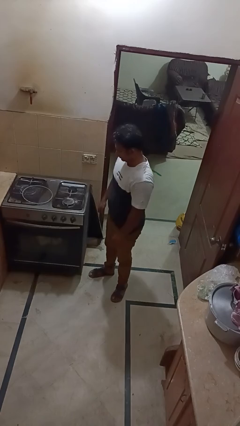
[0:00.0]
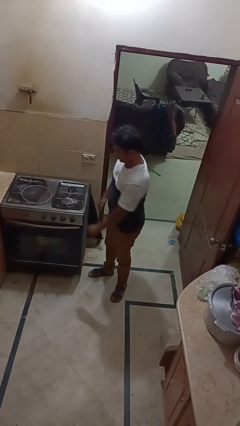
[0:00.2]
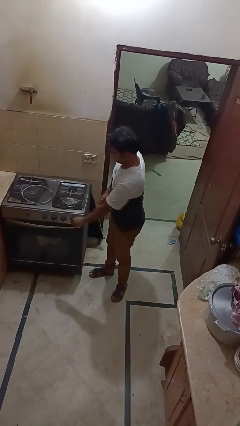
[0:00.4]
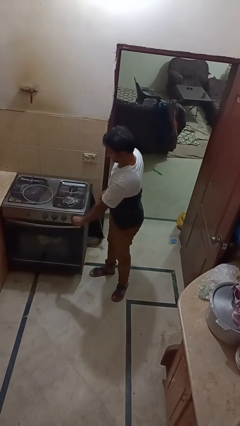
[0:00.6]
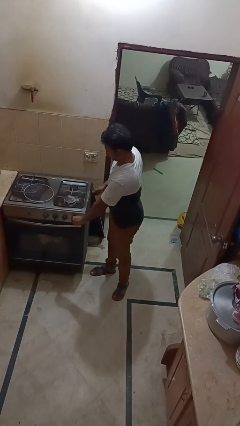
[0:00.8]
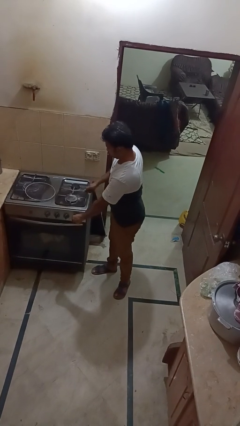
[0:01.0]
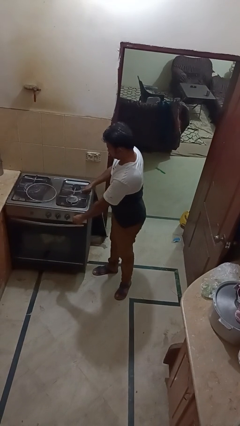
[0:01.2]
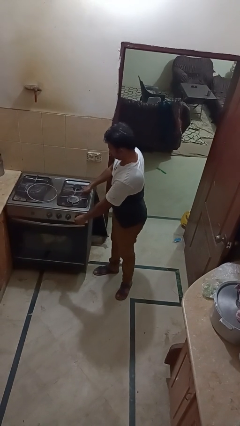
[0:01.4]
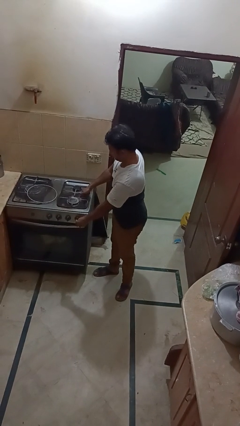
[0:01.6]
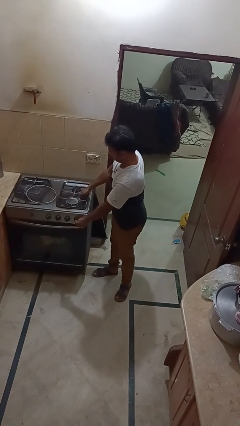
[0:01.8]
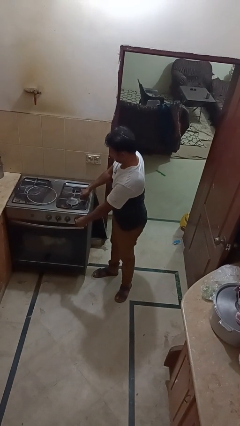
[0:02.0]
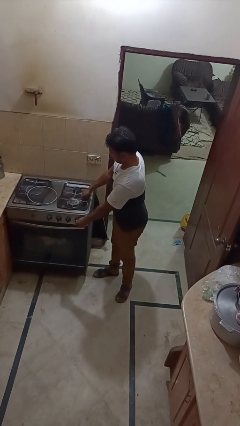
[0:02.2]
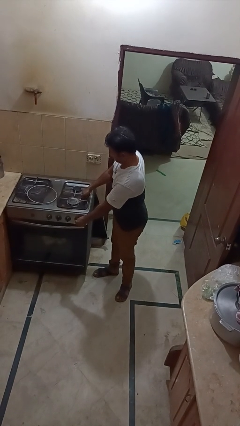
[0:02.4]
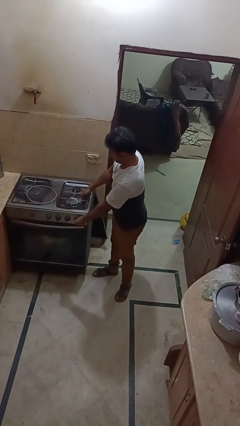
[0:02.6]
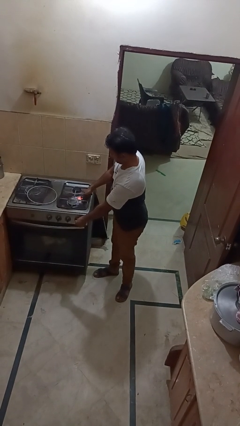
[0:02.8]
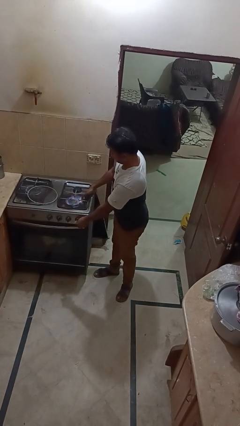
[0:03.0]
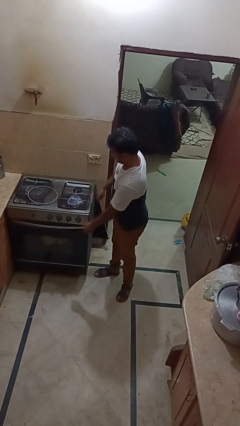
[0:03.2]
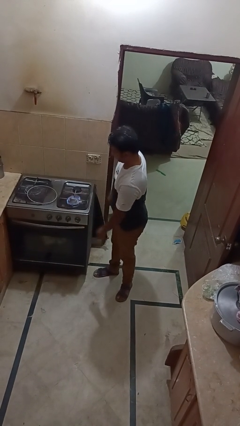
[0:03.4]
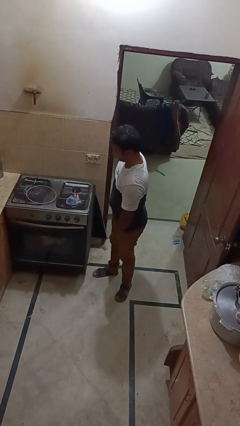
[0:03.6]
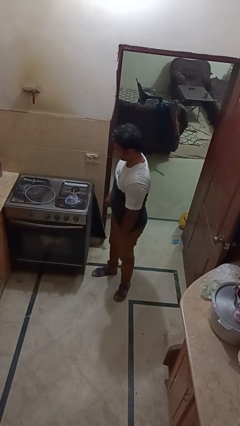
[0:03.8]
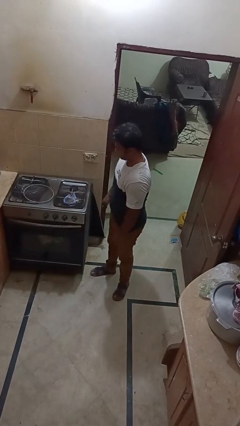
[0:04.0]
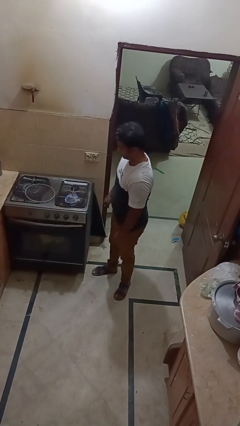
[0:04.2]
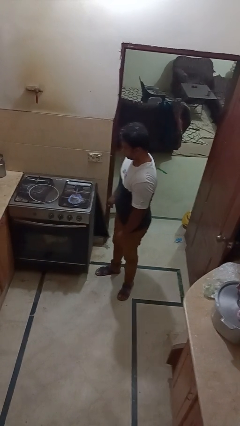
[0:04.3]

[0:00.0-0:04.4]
person turns on stovetop

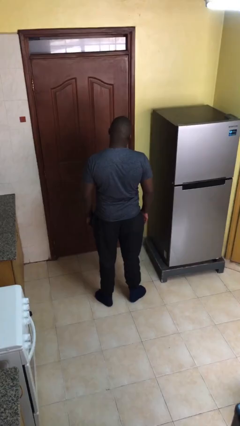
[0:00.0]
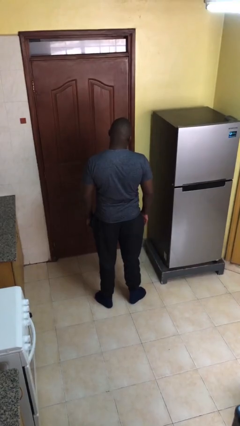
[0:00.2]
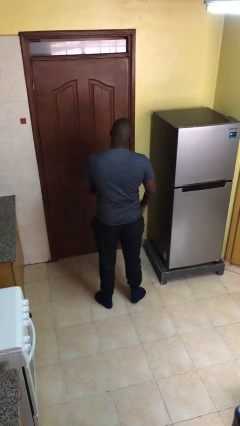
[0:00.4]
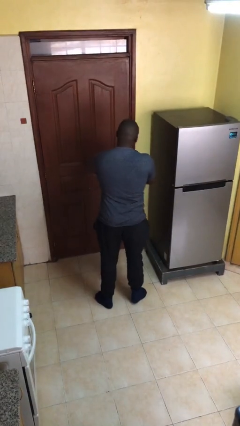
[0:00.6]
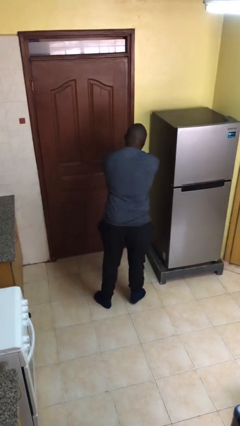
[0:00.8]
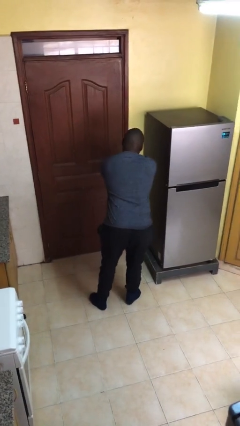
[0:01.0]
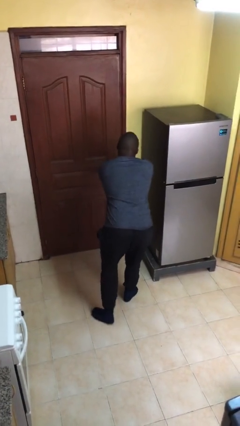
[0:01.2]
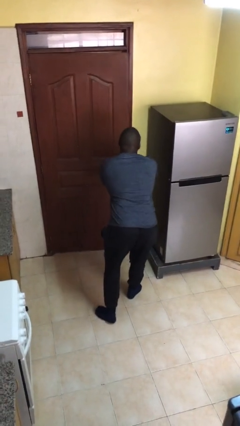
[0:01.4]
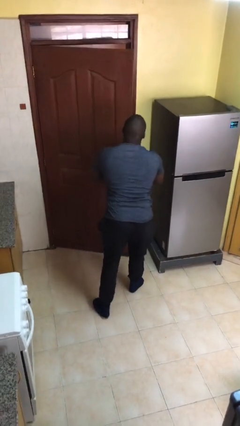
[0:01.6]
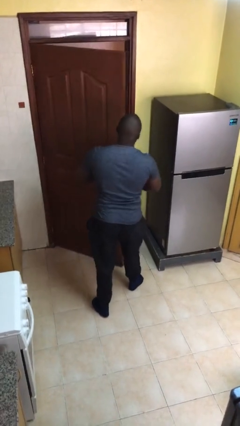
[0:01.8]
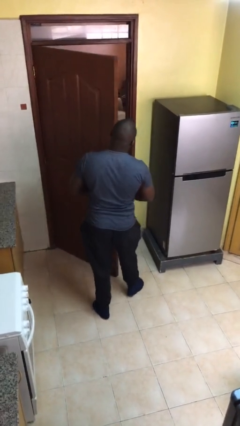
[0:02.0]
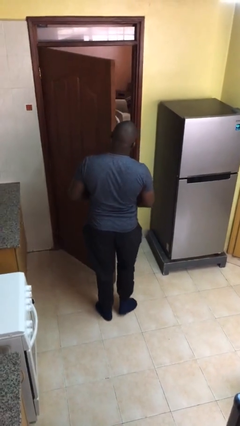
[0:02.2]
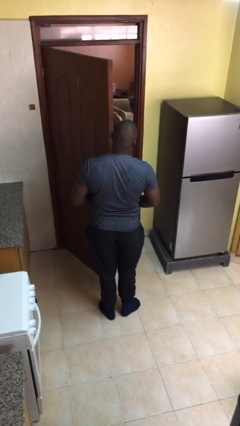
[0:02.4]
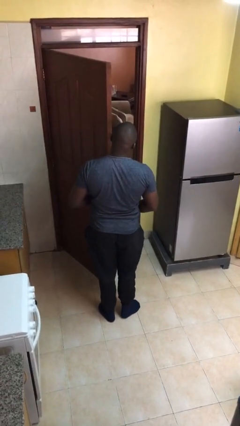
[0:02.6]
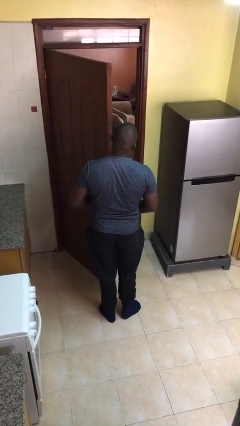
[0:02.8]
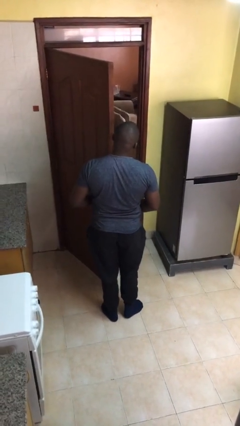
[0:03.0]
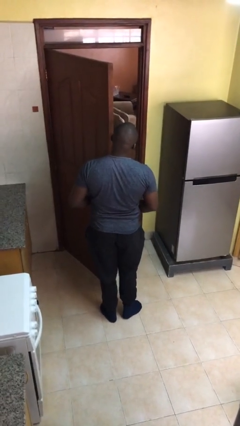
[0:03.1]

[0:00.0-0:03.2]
person opens facility door

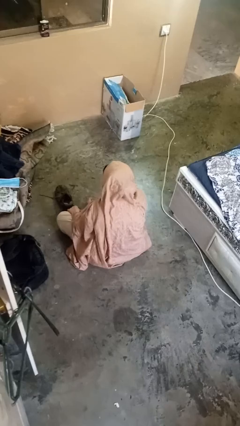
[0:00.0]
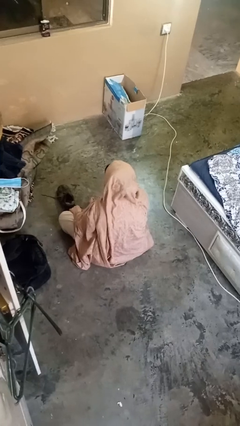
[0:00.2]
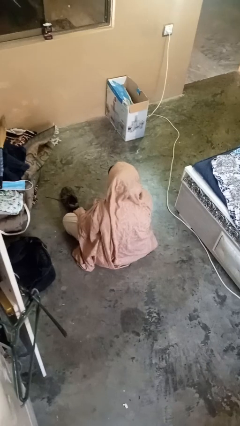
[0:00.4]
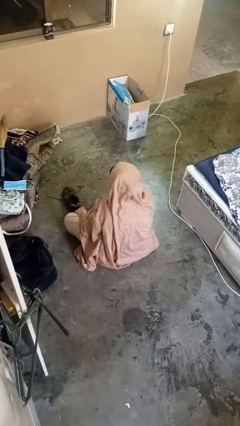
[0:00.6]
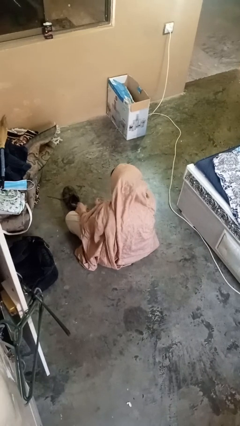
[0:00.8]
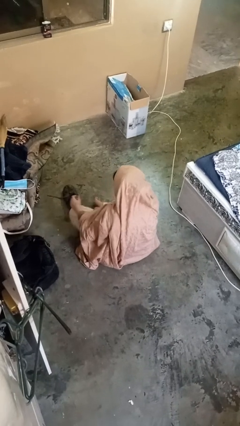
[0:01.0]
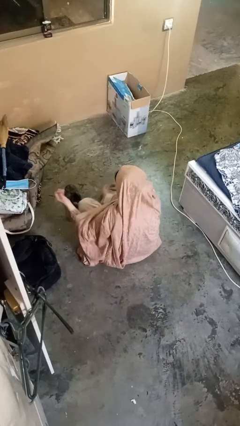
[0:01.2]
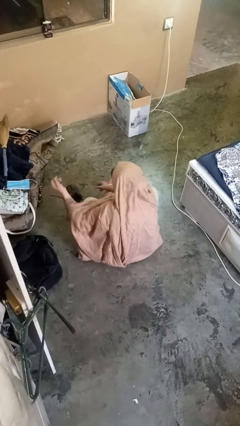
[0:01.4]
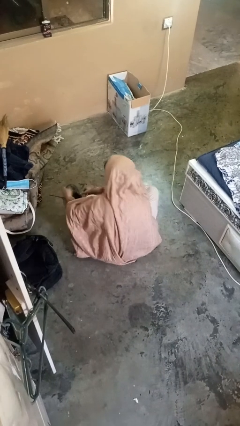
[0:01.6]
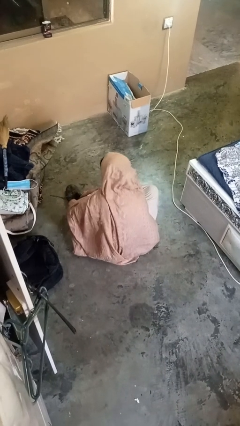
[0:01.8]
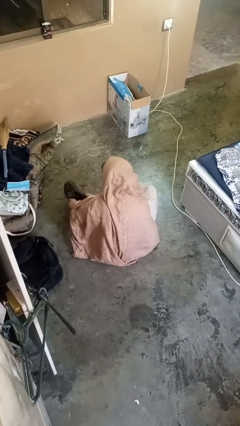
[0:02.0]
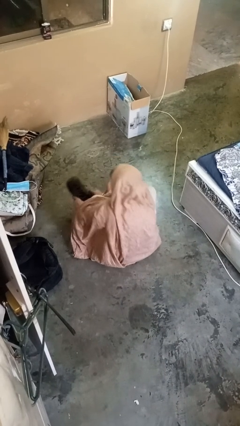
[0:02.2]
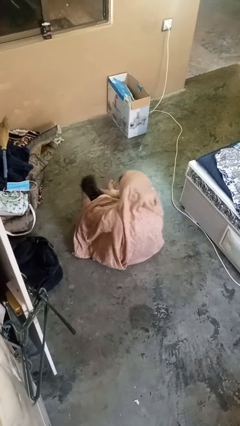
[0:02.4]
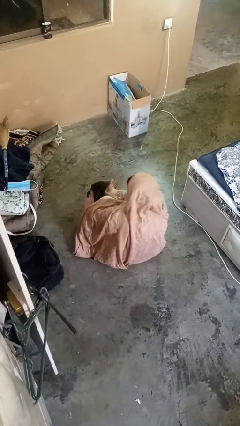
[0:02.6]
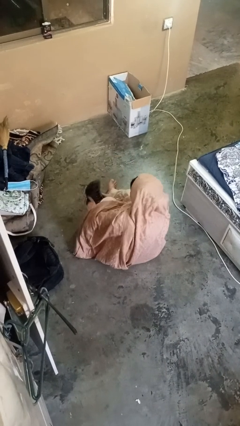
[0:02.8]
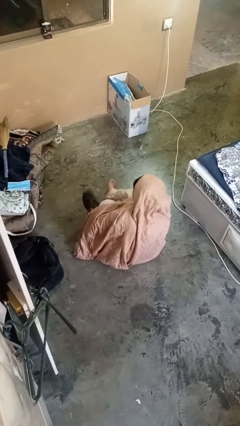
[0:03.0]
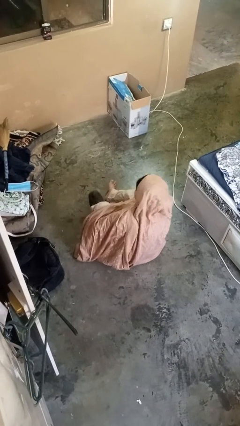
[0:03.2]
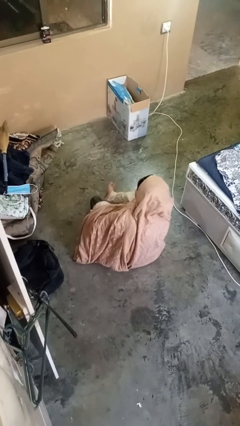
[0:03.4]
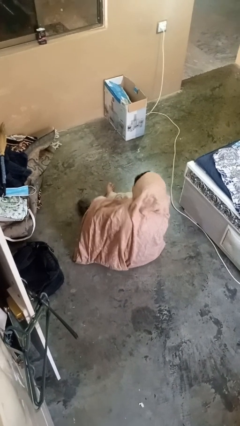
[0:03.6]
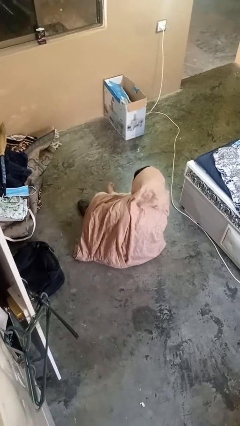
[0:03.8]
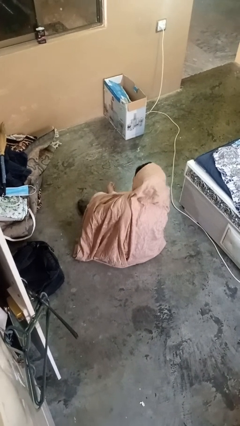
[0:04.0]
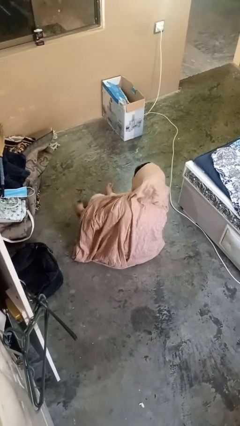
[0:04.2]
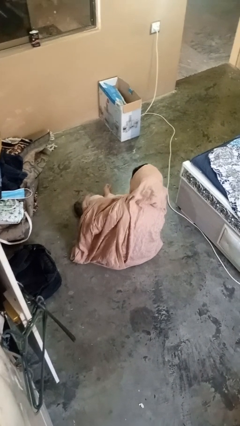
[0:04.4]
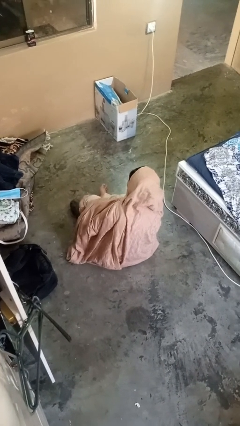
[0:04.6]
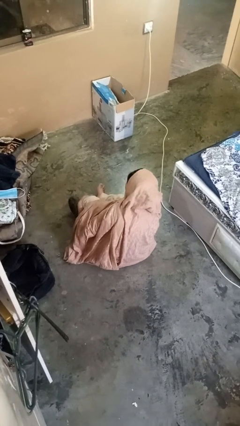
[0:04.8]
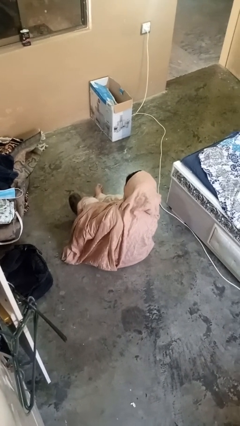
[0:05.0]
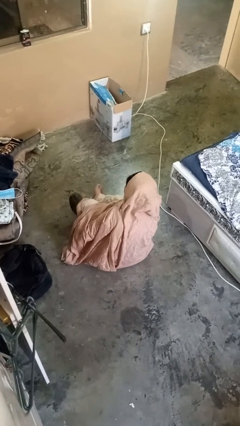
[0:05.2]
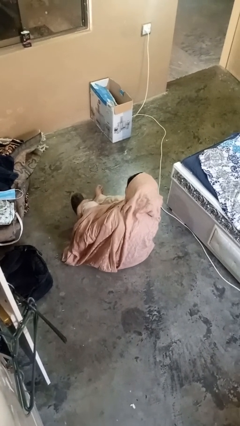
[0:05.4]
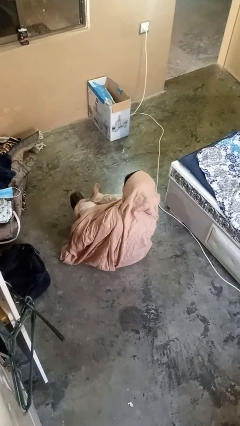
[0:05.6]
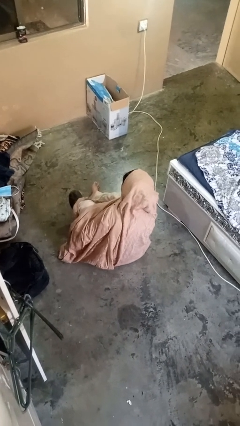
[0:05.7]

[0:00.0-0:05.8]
person puts on shoes

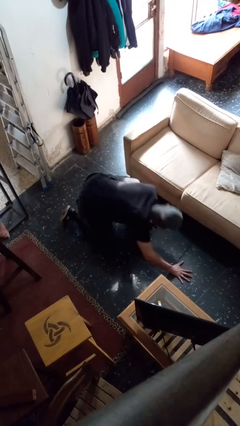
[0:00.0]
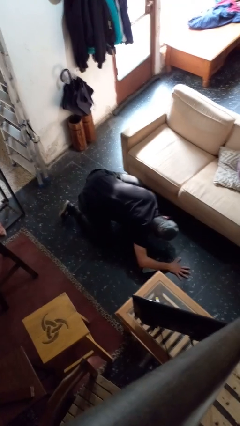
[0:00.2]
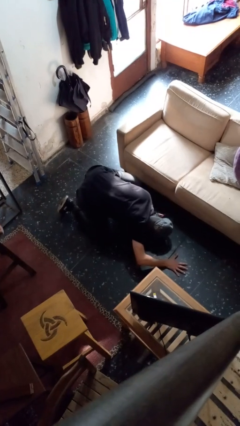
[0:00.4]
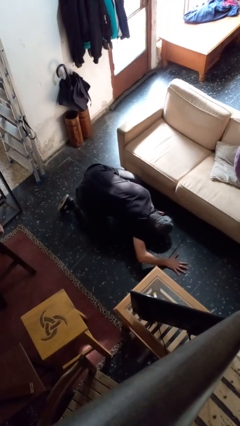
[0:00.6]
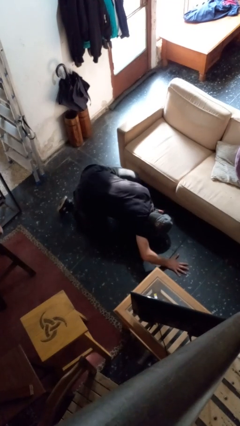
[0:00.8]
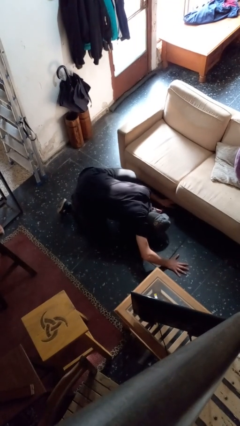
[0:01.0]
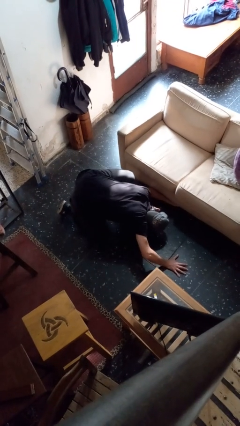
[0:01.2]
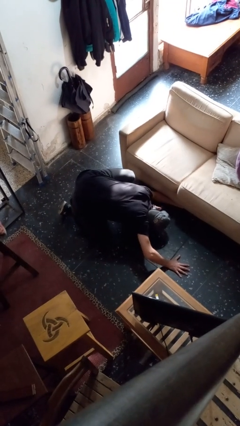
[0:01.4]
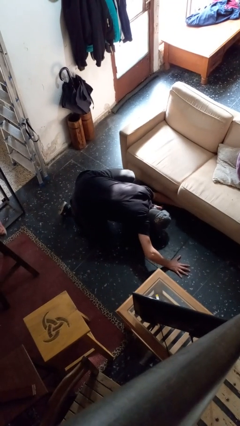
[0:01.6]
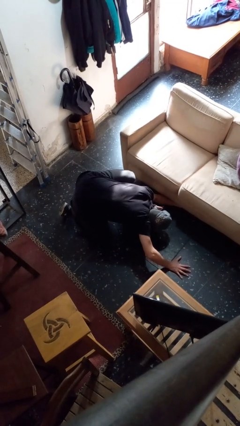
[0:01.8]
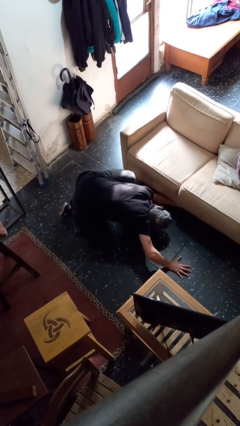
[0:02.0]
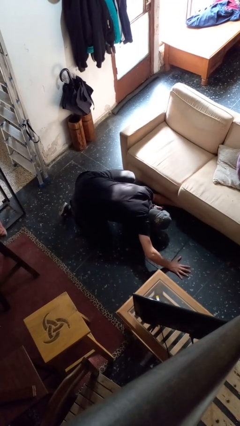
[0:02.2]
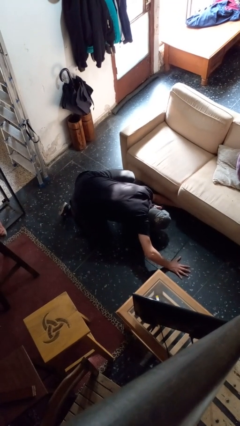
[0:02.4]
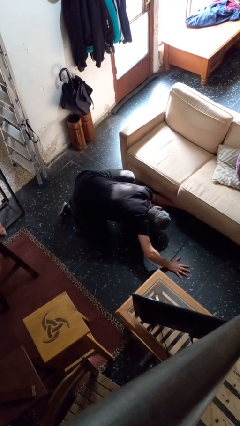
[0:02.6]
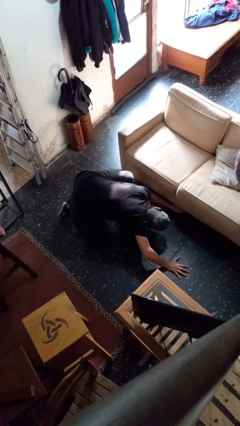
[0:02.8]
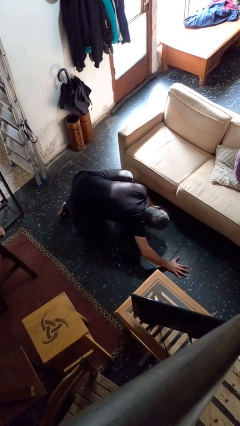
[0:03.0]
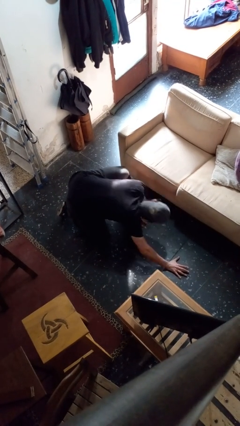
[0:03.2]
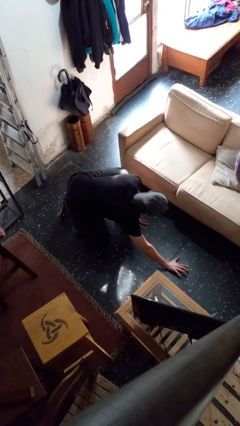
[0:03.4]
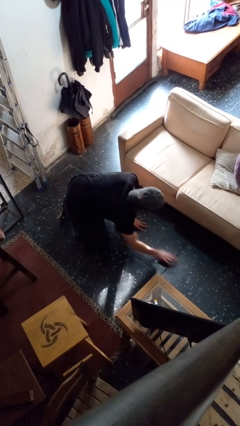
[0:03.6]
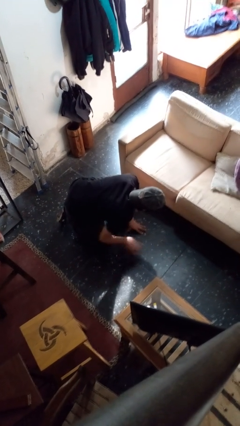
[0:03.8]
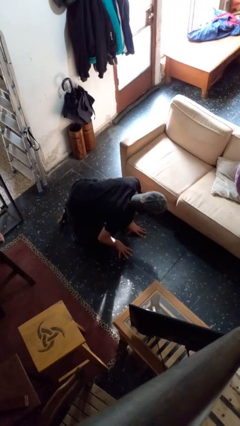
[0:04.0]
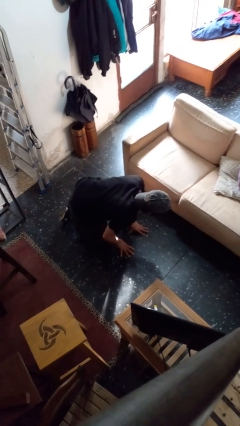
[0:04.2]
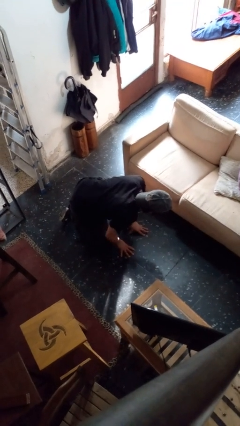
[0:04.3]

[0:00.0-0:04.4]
person searches under couch

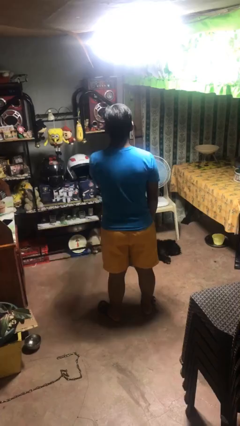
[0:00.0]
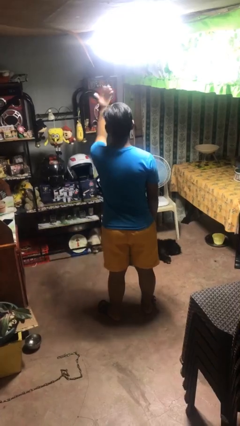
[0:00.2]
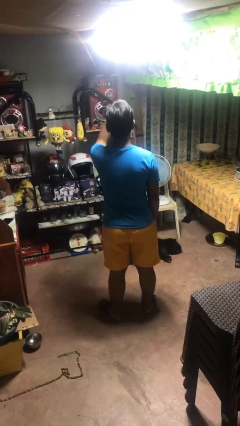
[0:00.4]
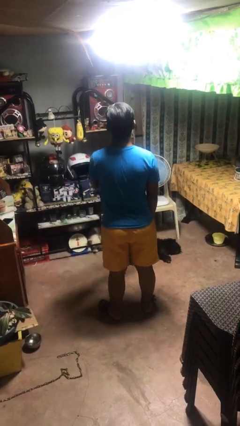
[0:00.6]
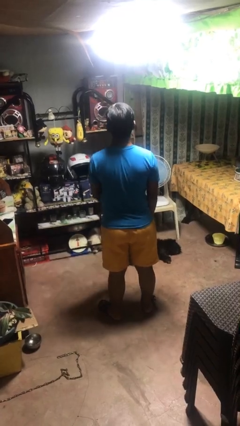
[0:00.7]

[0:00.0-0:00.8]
person gestures swipe up
